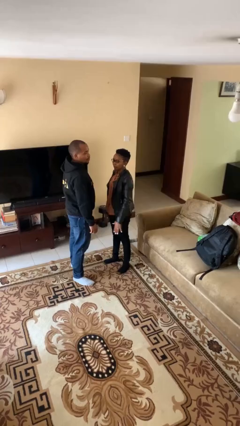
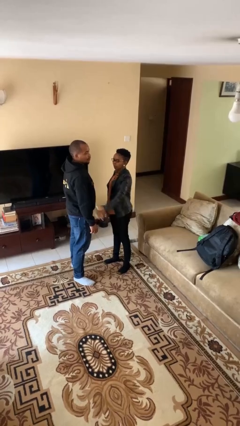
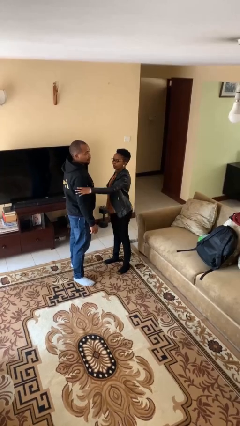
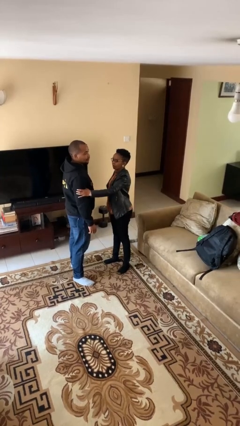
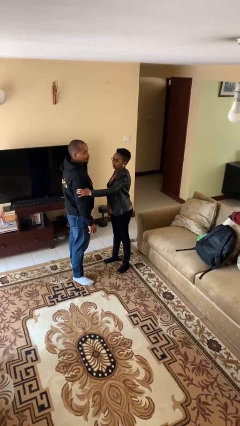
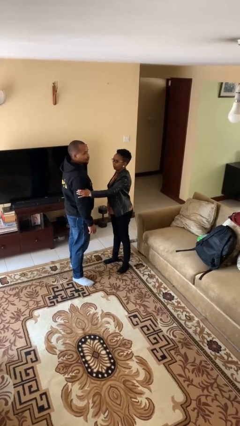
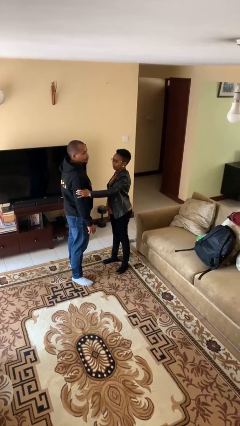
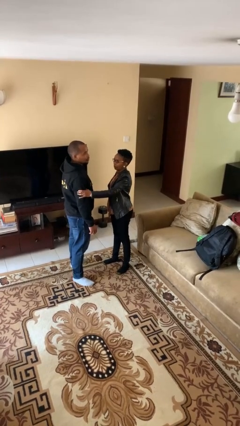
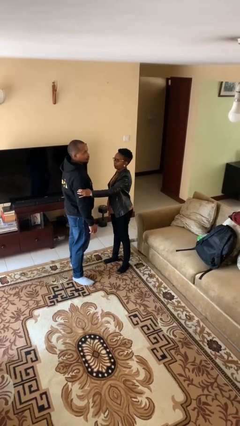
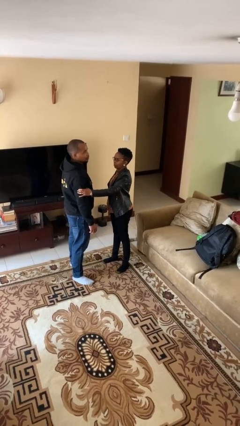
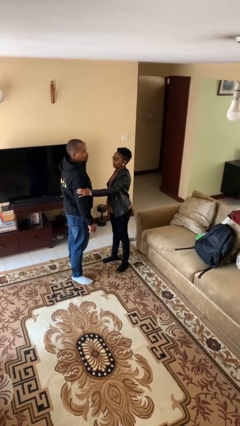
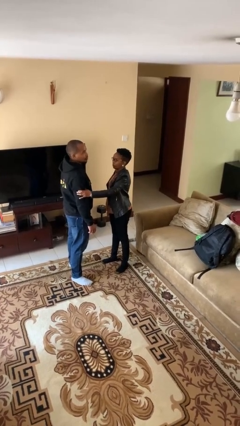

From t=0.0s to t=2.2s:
person grabs person by bicep

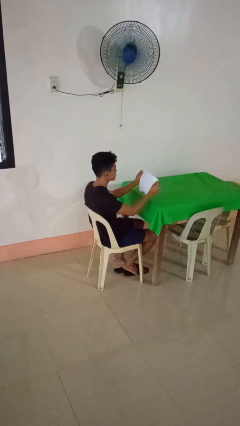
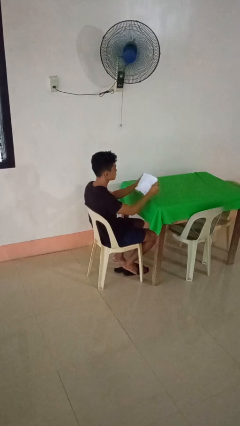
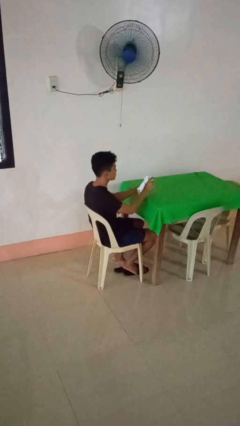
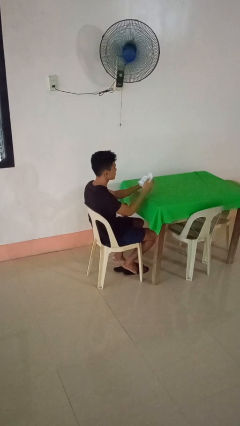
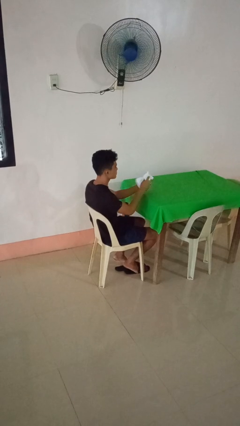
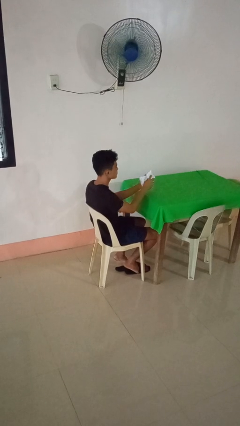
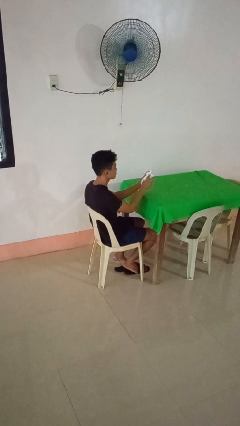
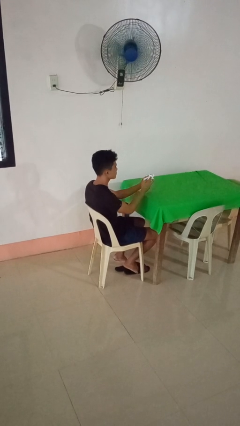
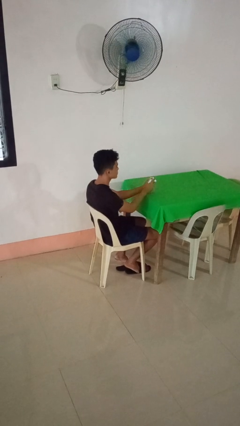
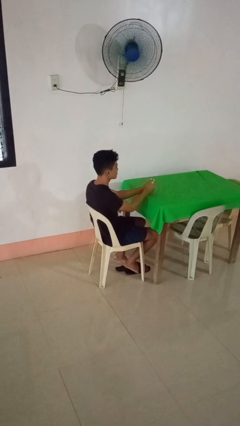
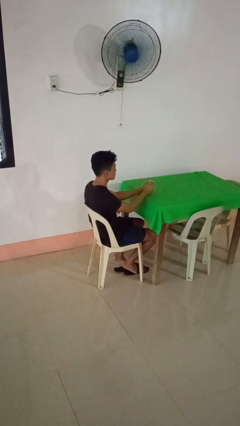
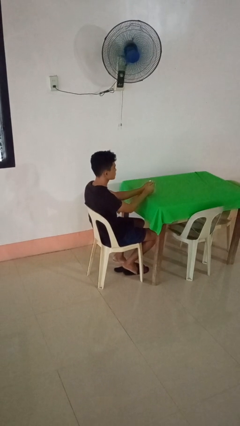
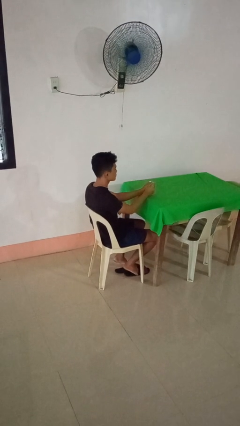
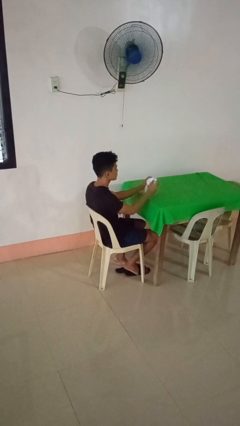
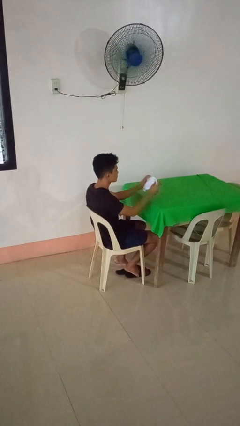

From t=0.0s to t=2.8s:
person crumples paper

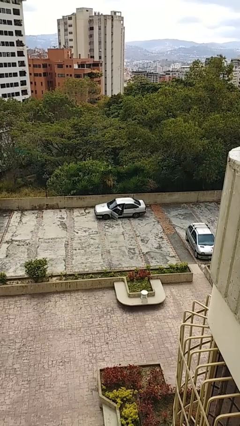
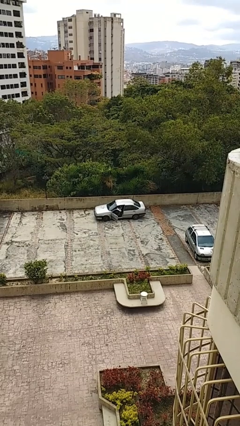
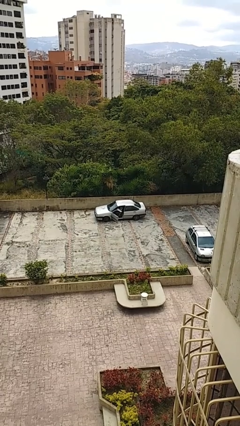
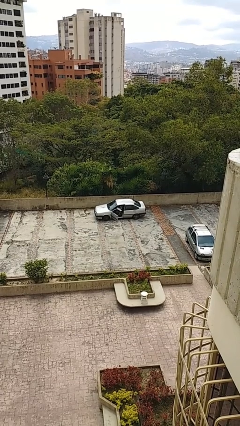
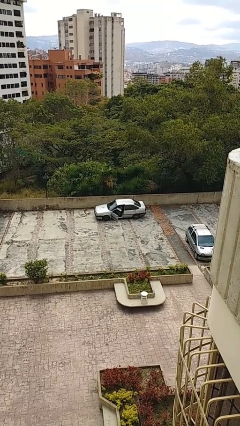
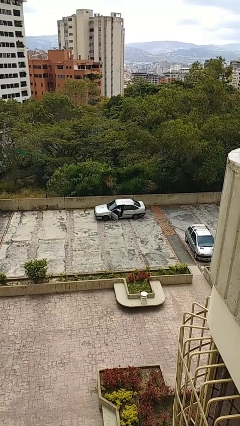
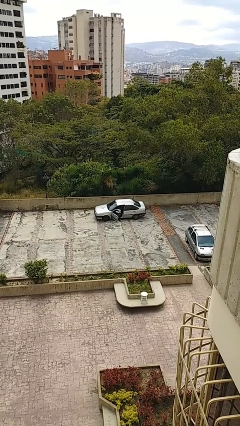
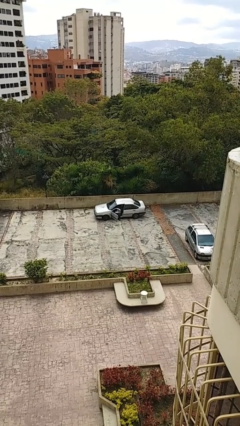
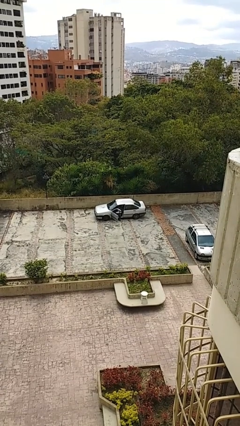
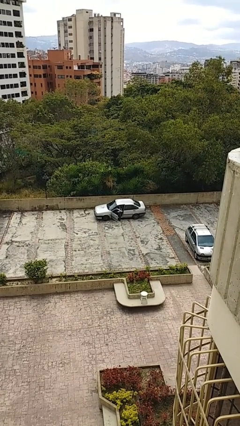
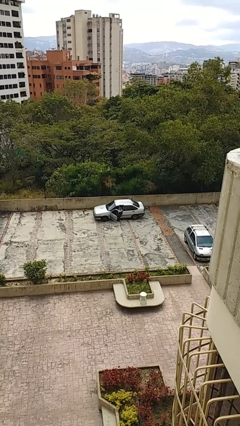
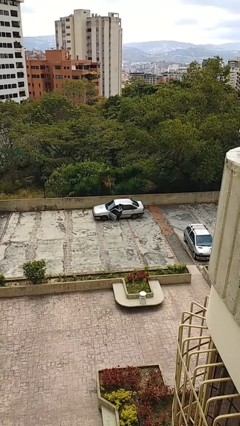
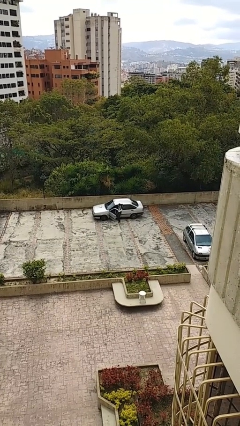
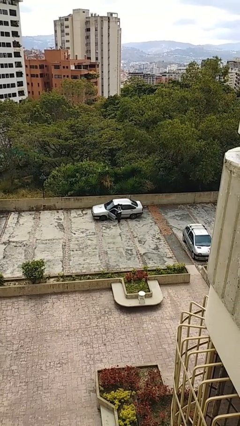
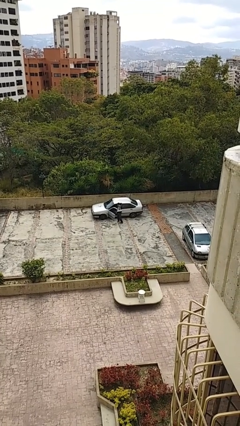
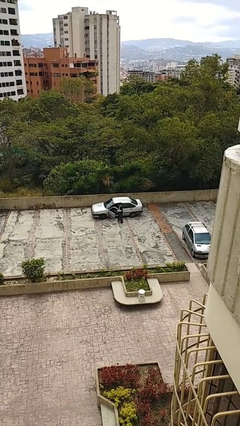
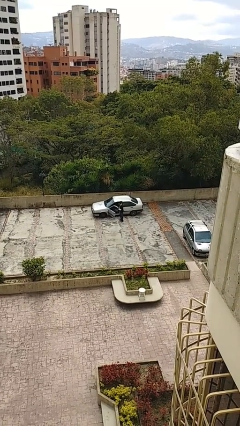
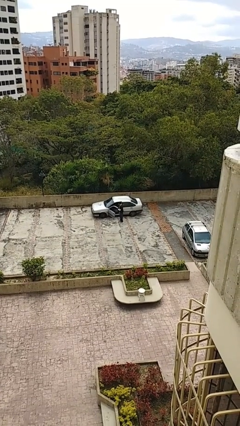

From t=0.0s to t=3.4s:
person exits car

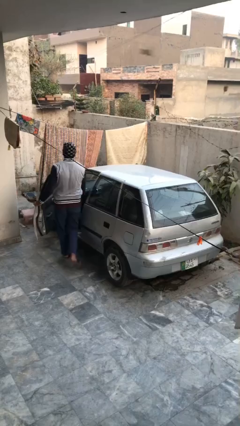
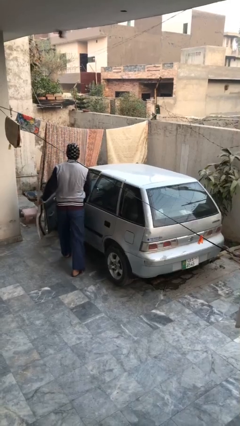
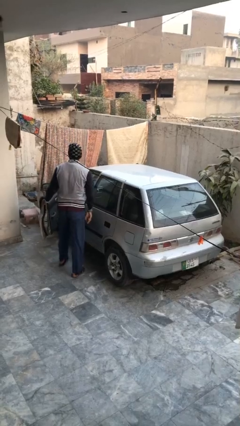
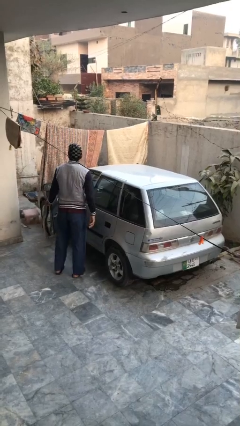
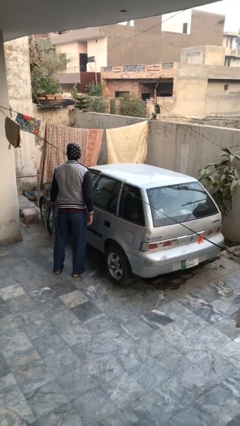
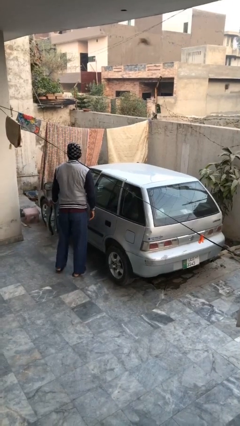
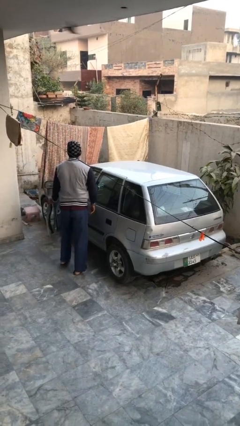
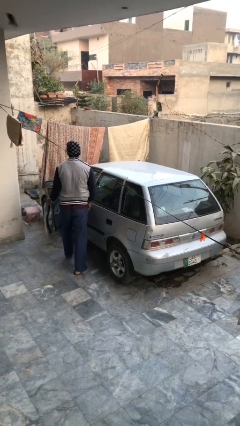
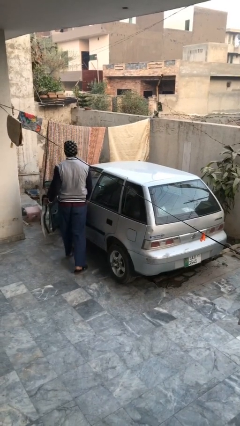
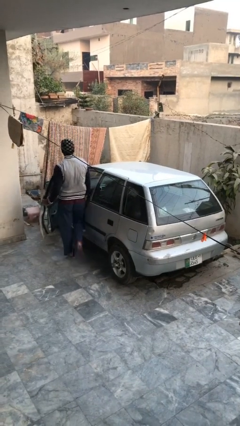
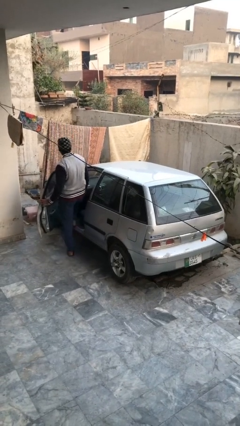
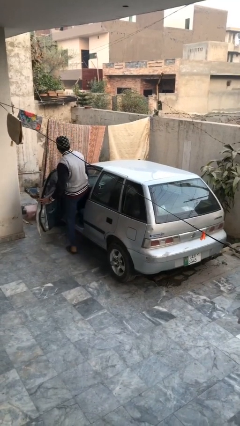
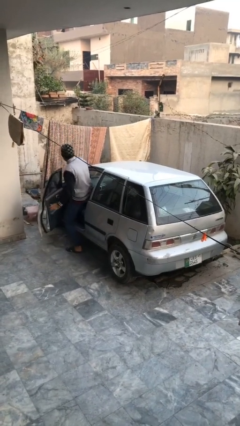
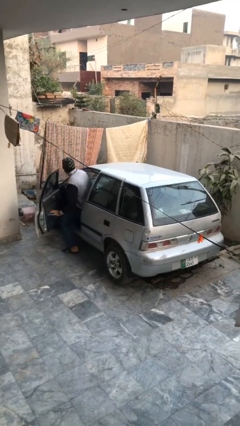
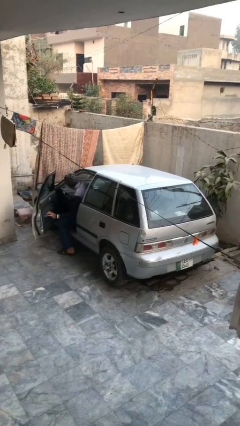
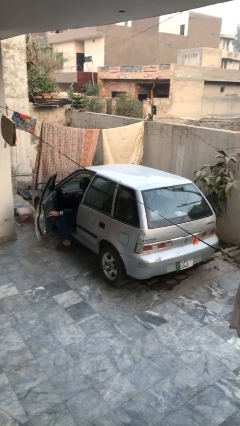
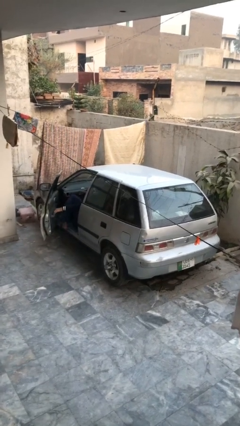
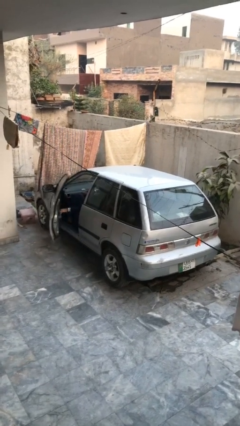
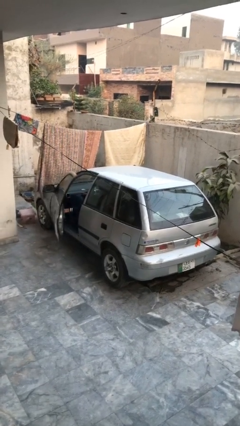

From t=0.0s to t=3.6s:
car picks up person

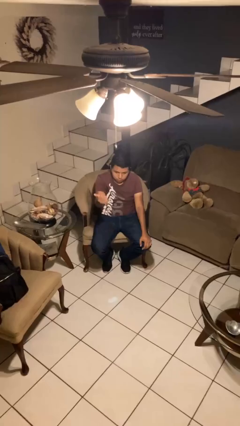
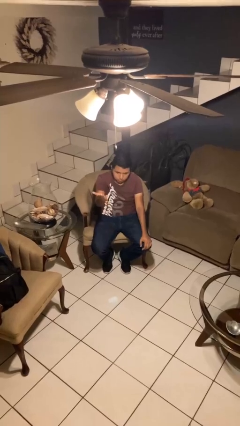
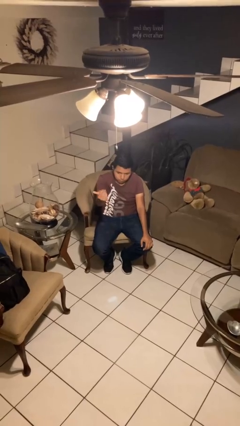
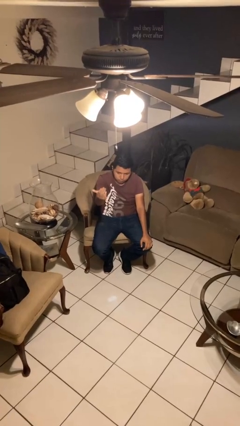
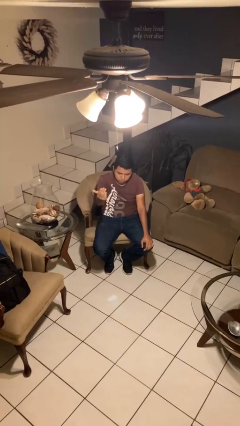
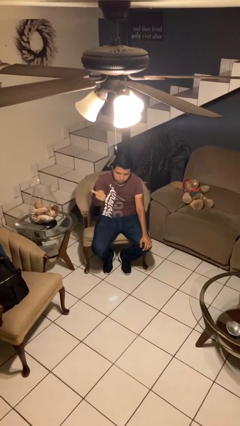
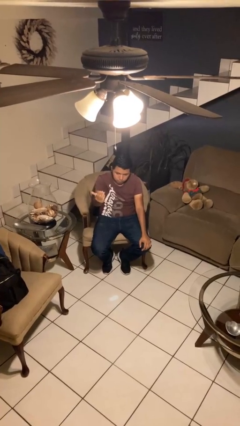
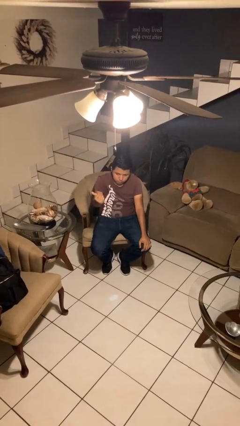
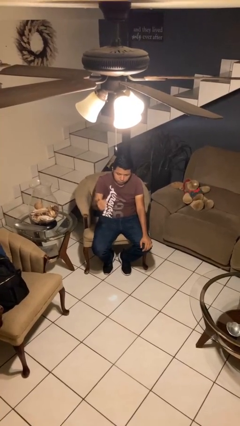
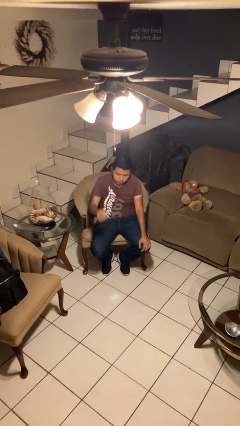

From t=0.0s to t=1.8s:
person gestures come here

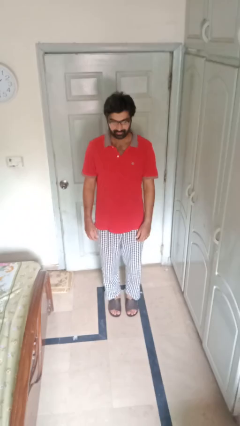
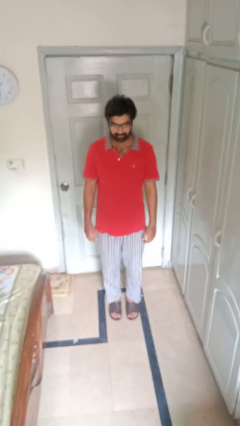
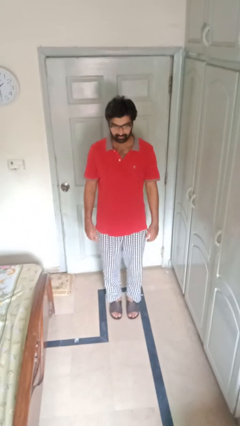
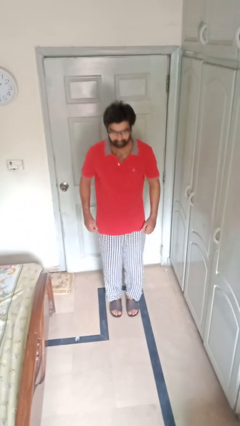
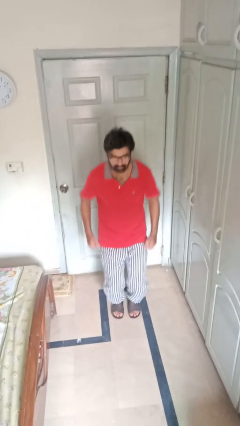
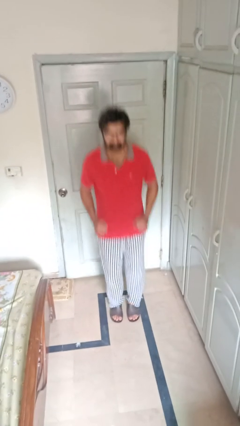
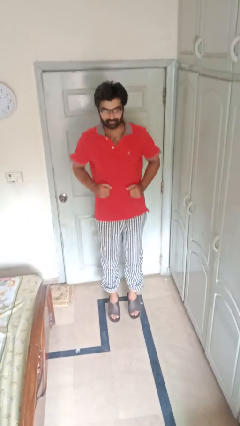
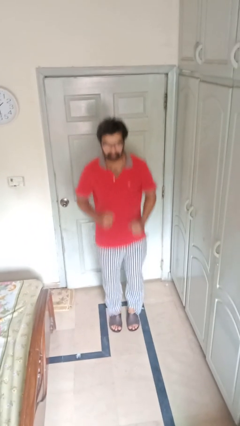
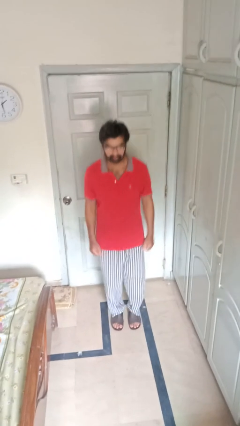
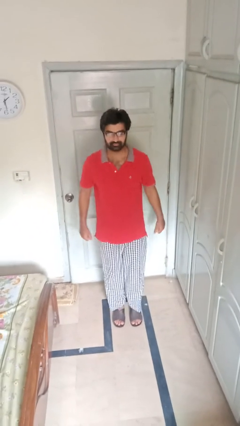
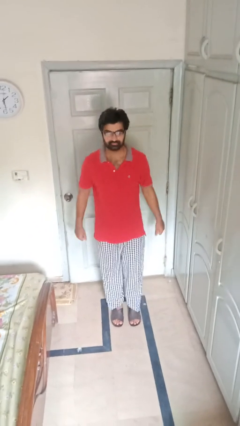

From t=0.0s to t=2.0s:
person jumps

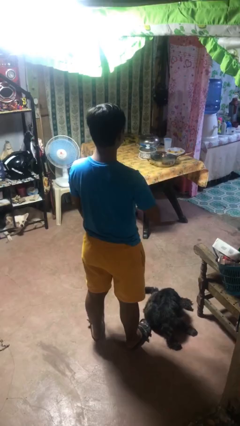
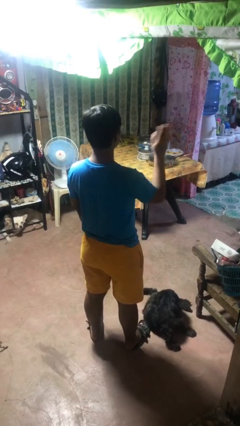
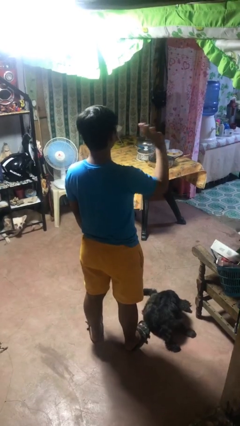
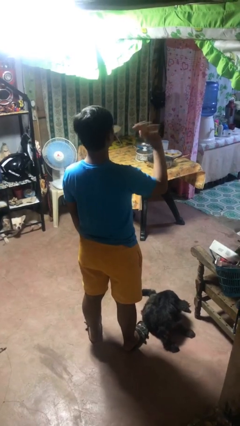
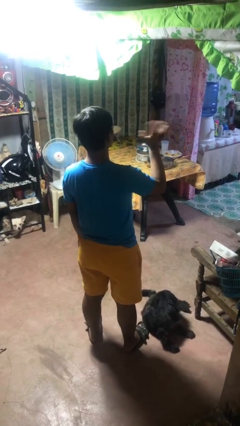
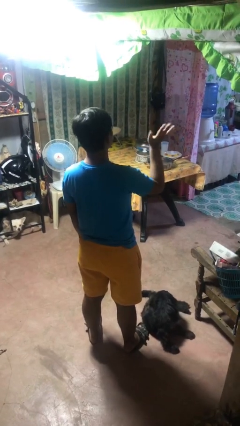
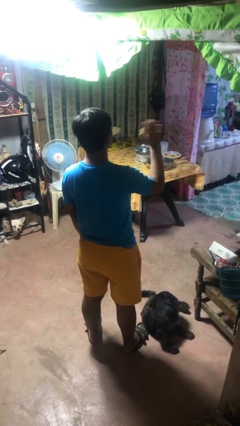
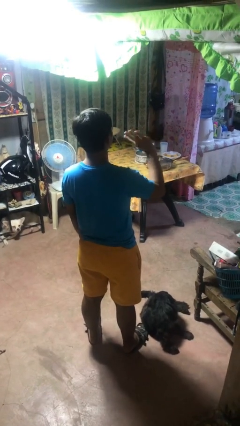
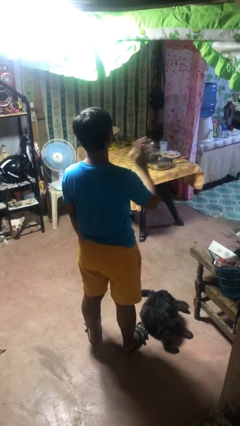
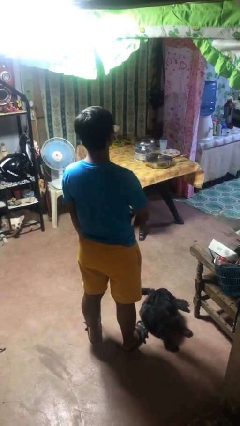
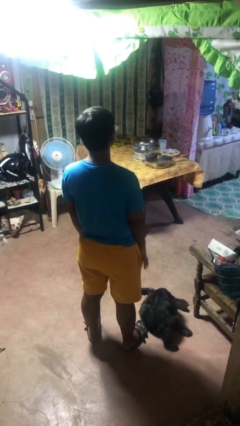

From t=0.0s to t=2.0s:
person waves at person
